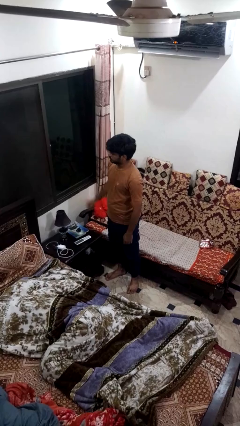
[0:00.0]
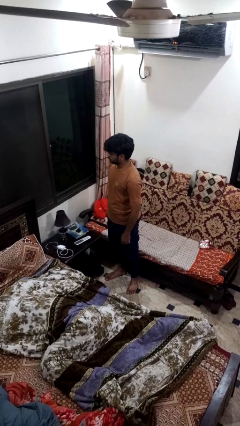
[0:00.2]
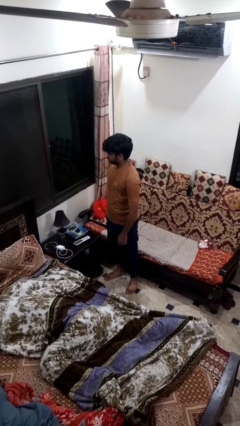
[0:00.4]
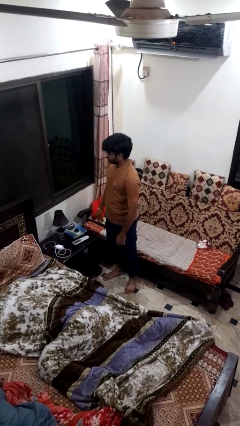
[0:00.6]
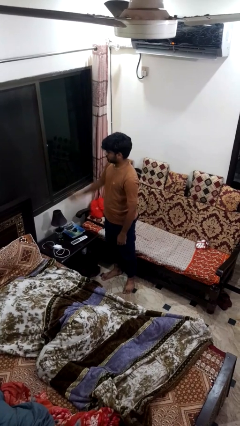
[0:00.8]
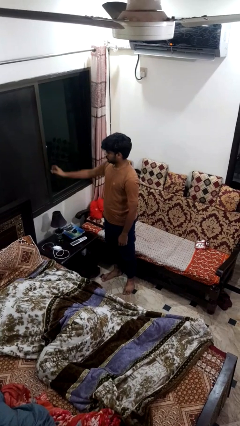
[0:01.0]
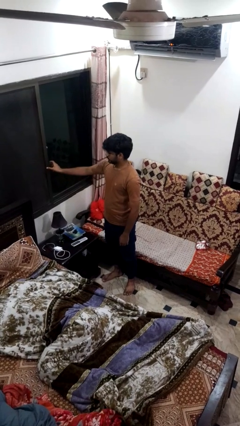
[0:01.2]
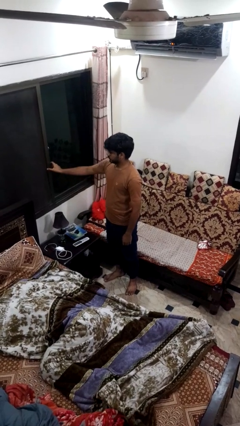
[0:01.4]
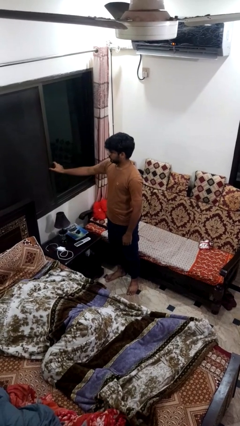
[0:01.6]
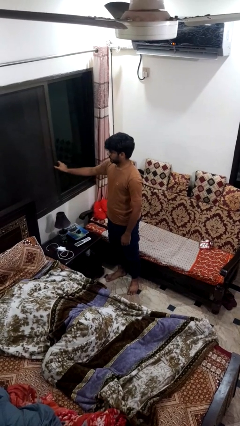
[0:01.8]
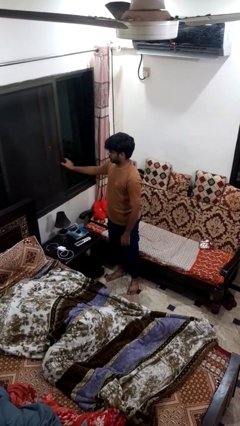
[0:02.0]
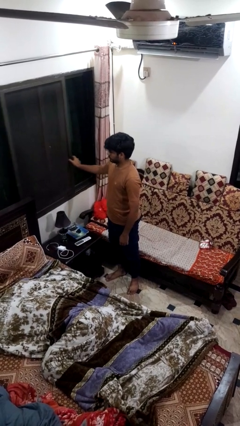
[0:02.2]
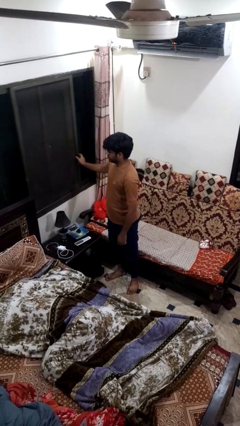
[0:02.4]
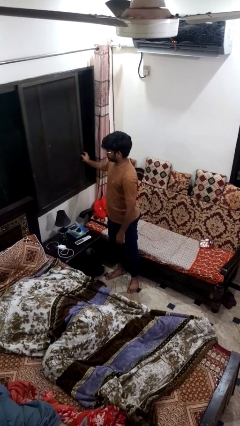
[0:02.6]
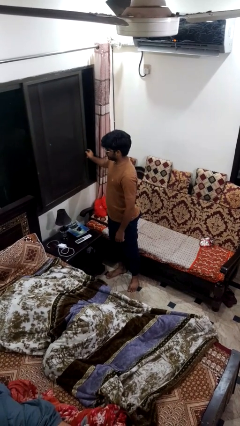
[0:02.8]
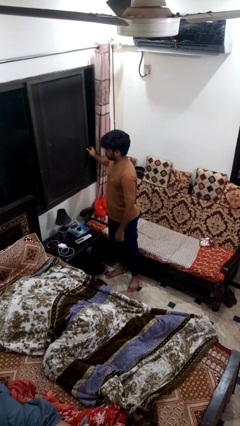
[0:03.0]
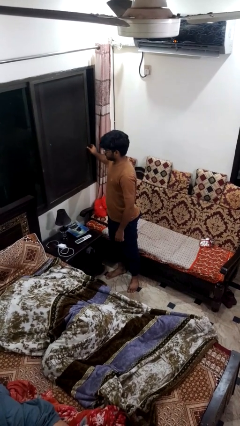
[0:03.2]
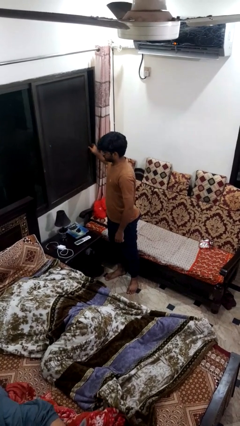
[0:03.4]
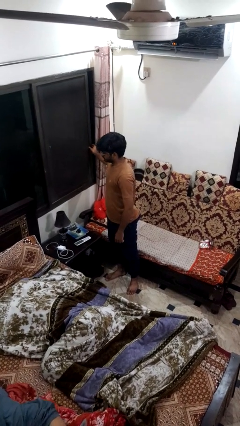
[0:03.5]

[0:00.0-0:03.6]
person opens home window

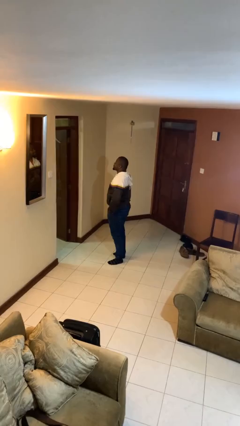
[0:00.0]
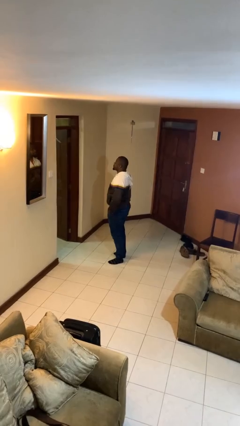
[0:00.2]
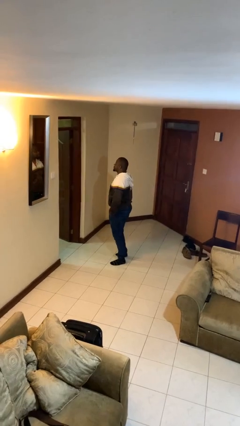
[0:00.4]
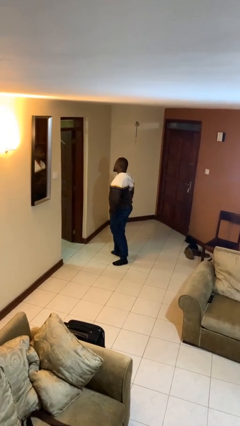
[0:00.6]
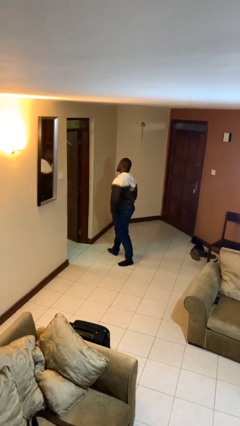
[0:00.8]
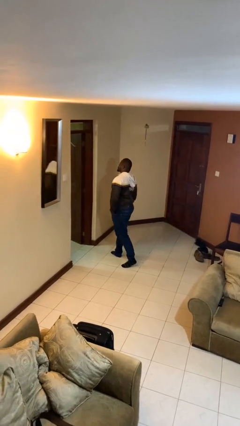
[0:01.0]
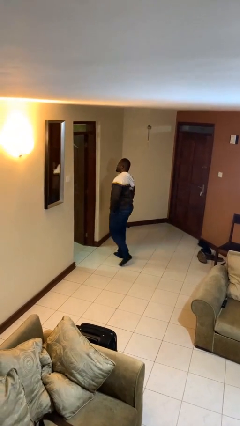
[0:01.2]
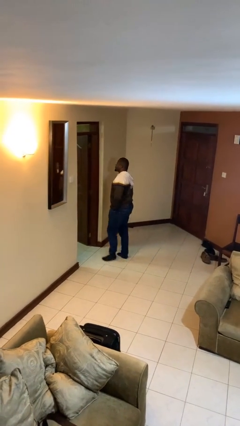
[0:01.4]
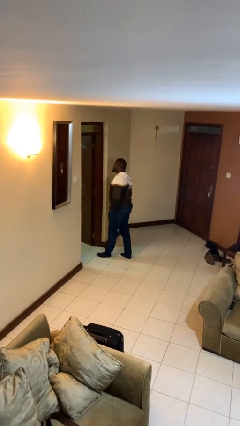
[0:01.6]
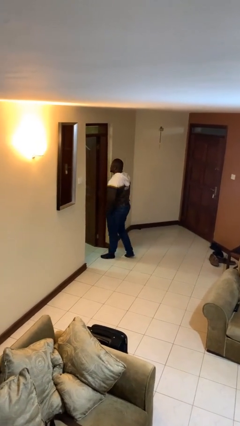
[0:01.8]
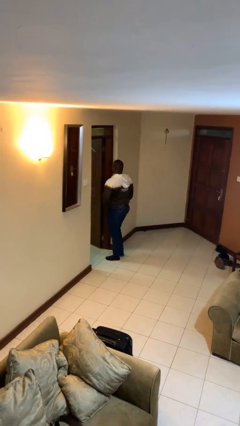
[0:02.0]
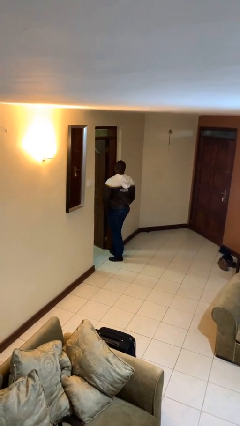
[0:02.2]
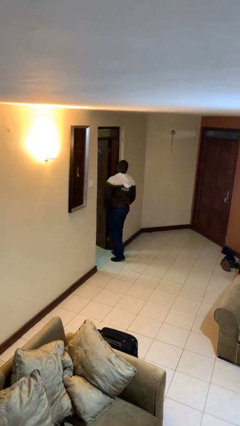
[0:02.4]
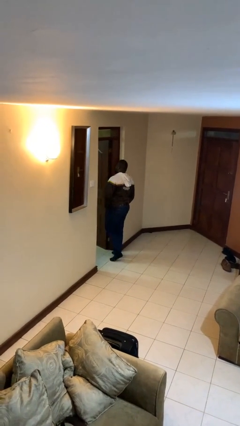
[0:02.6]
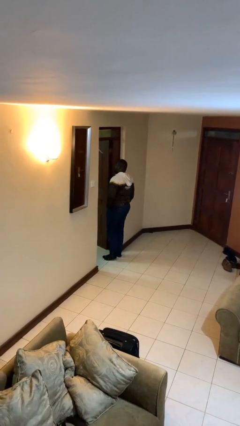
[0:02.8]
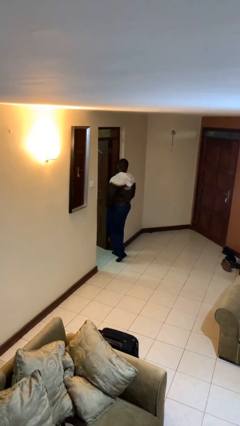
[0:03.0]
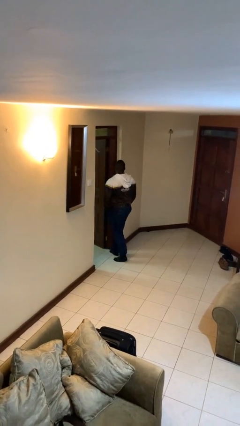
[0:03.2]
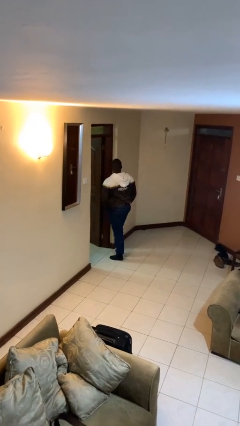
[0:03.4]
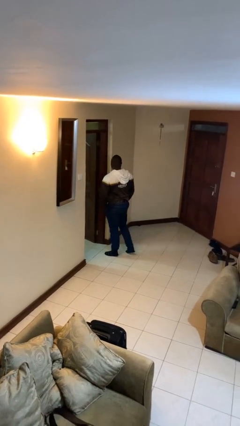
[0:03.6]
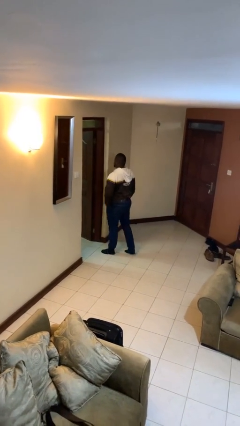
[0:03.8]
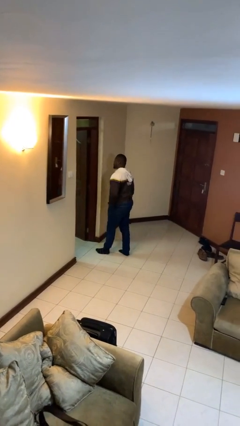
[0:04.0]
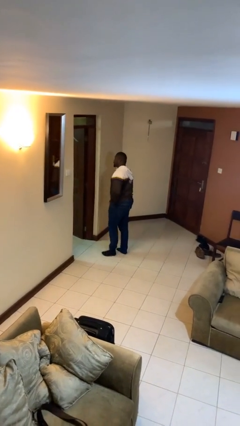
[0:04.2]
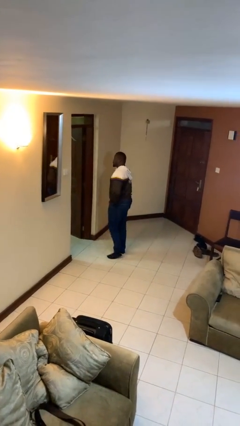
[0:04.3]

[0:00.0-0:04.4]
person bumps into wall

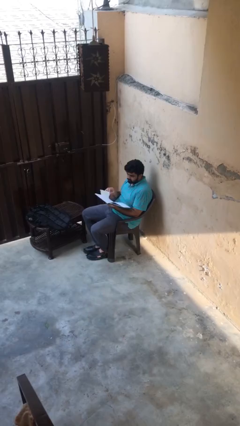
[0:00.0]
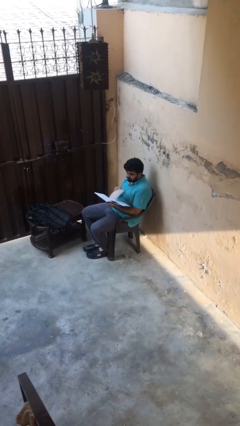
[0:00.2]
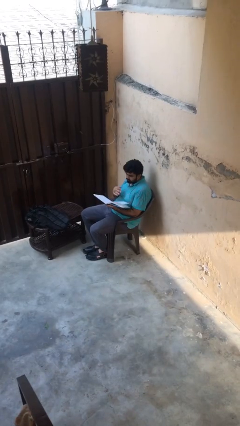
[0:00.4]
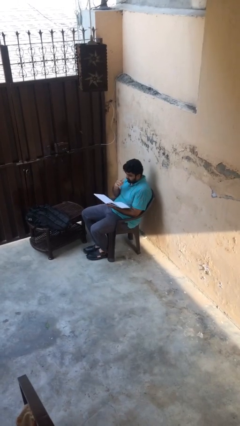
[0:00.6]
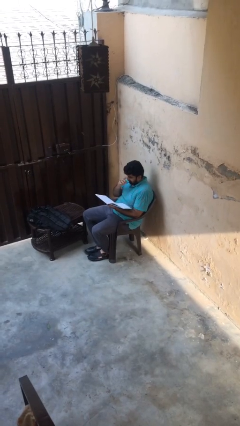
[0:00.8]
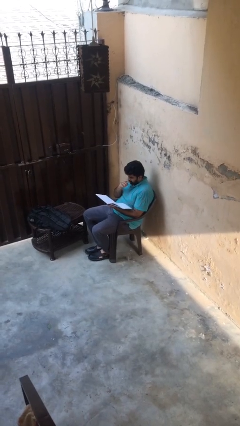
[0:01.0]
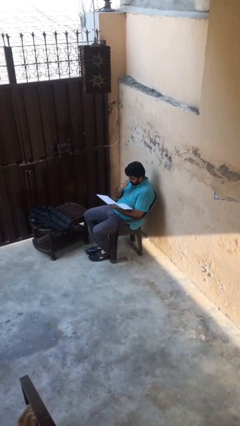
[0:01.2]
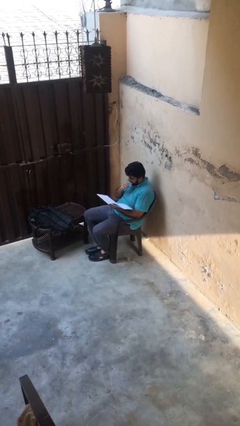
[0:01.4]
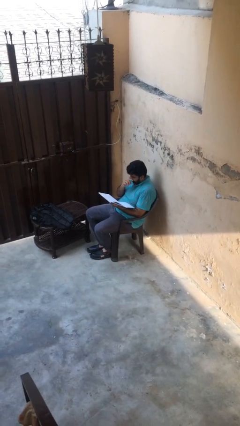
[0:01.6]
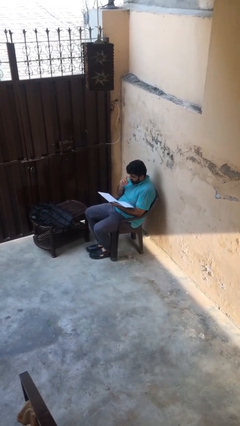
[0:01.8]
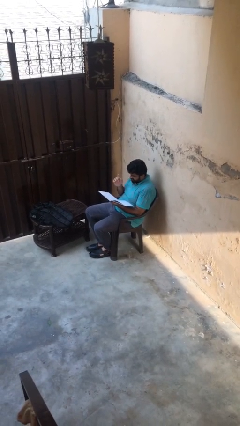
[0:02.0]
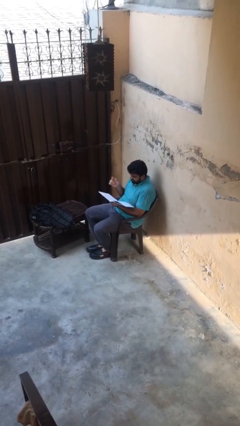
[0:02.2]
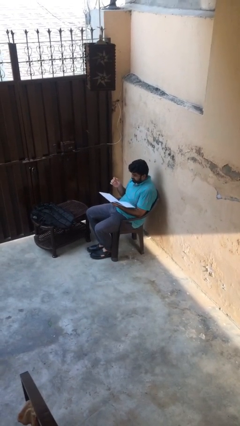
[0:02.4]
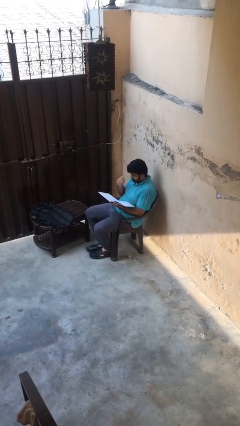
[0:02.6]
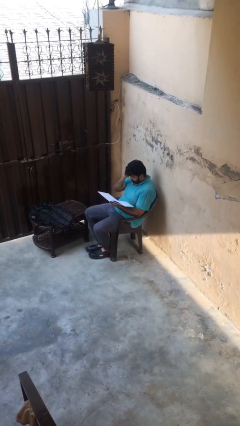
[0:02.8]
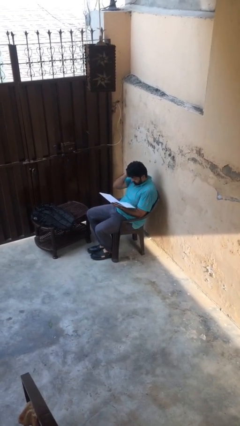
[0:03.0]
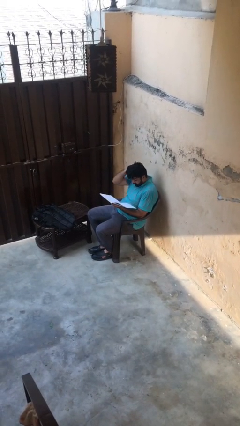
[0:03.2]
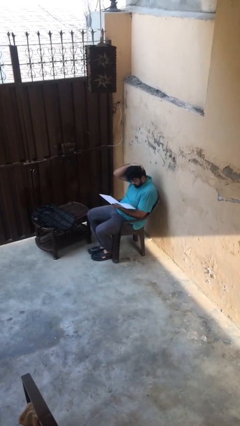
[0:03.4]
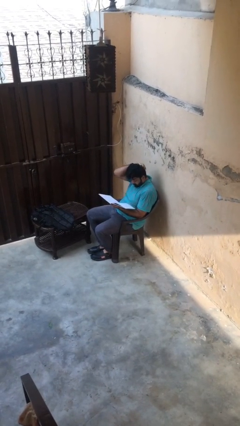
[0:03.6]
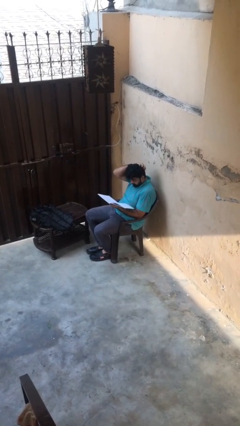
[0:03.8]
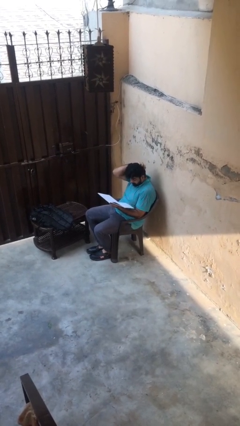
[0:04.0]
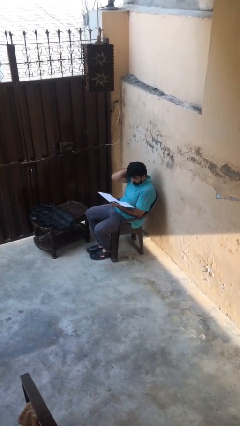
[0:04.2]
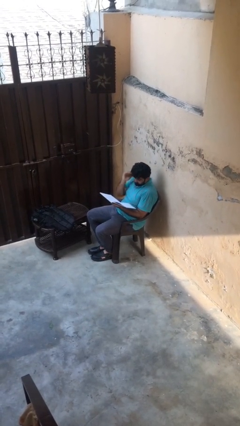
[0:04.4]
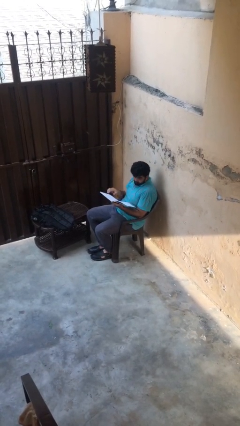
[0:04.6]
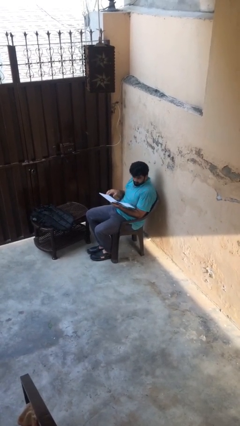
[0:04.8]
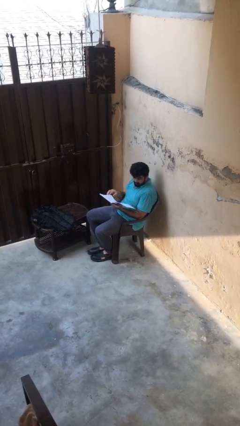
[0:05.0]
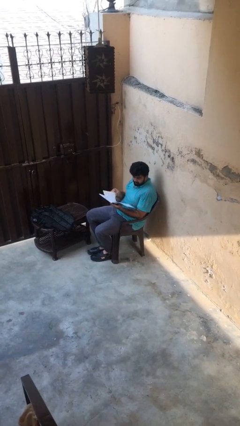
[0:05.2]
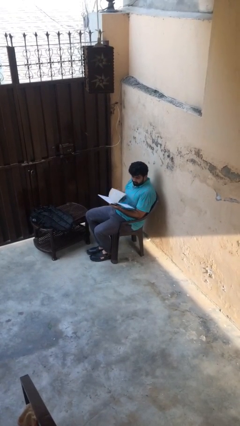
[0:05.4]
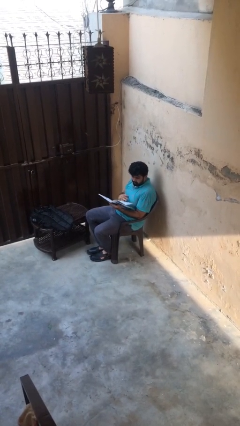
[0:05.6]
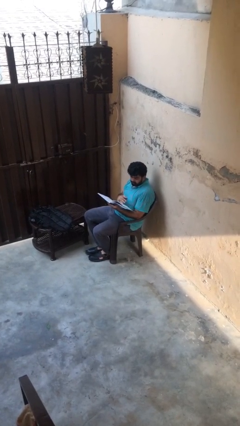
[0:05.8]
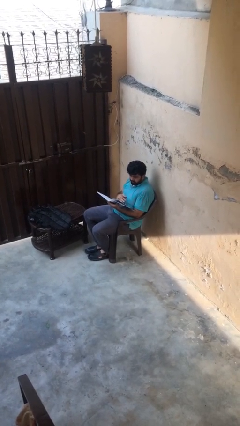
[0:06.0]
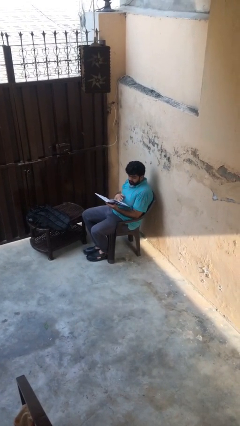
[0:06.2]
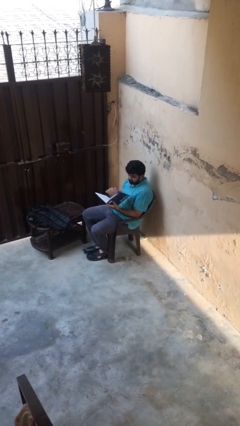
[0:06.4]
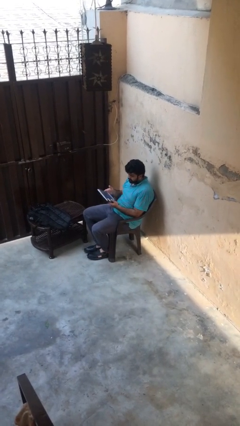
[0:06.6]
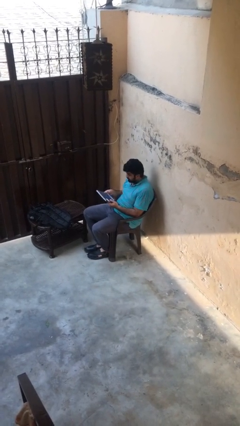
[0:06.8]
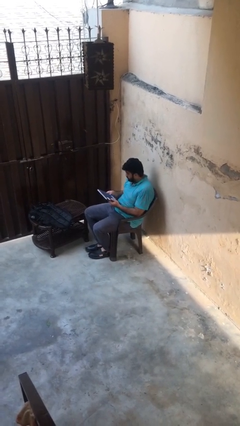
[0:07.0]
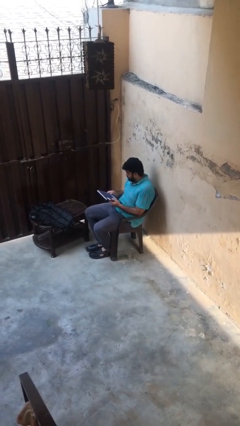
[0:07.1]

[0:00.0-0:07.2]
person reads document

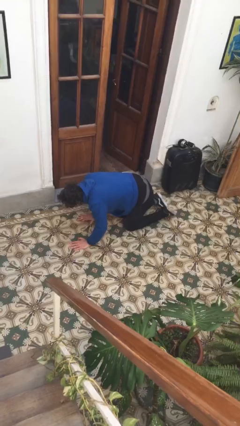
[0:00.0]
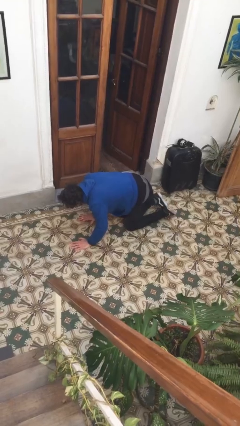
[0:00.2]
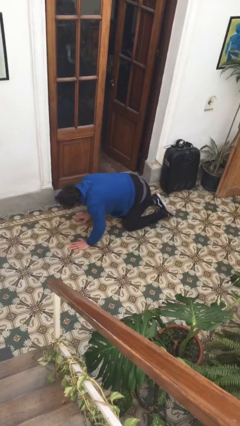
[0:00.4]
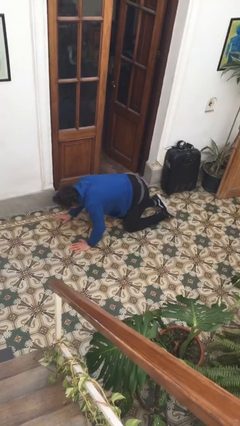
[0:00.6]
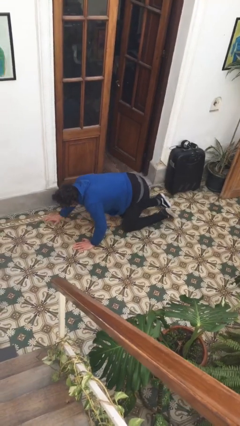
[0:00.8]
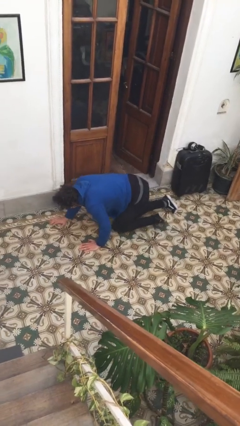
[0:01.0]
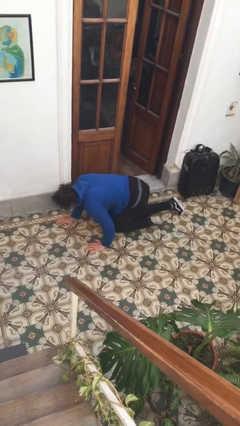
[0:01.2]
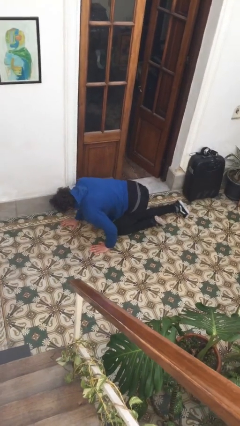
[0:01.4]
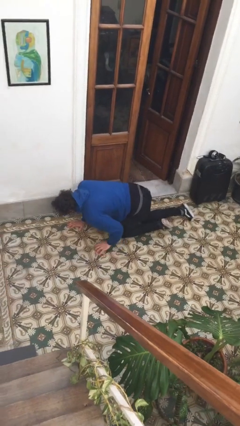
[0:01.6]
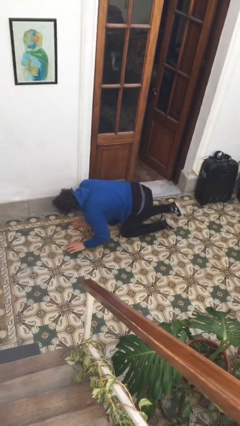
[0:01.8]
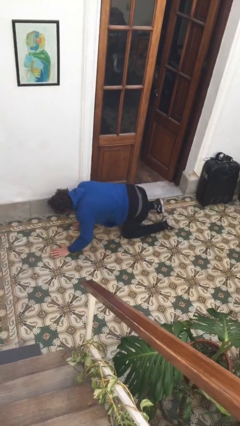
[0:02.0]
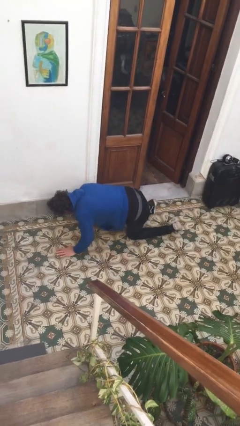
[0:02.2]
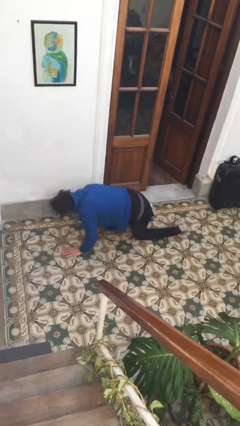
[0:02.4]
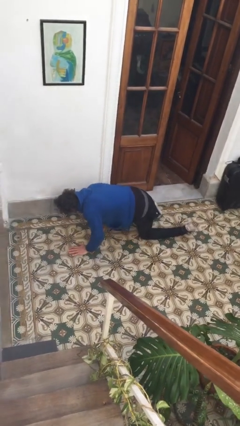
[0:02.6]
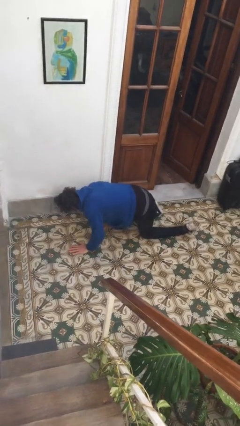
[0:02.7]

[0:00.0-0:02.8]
person crawls
